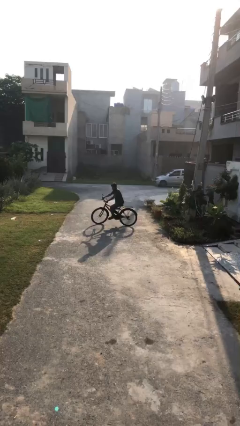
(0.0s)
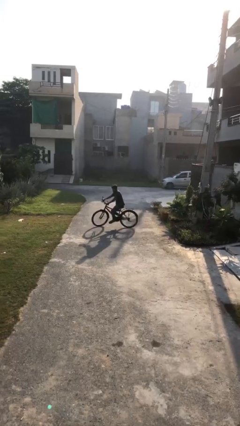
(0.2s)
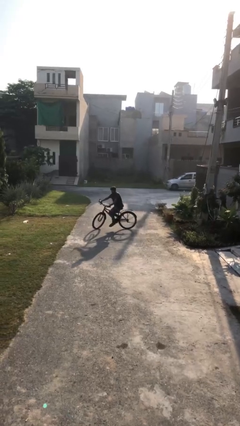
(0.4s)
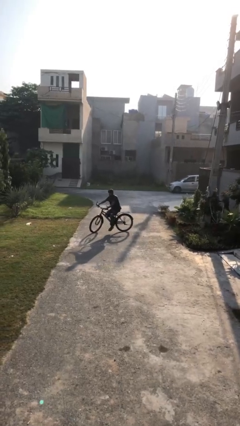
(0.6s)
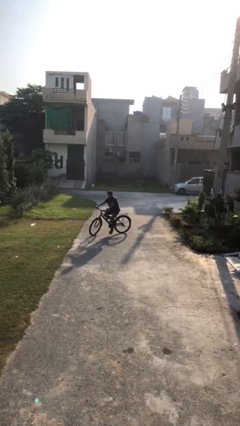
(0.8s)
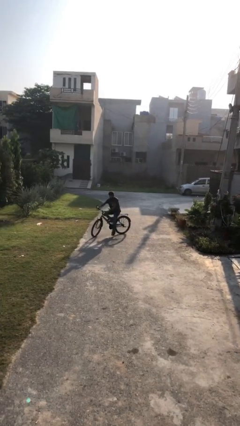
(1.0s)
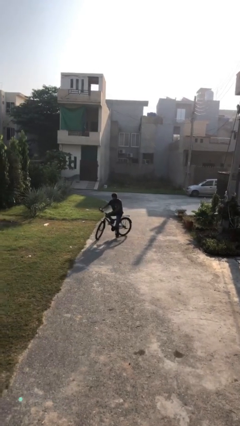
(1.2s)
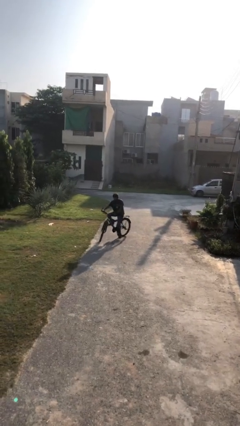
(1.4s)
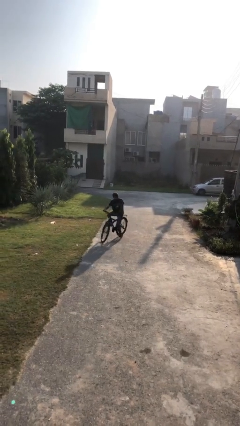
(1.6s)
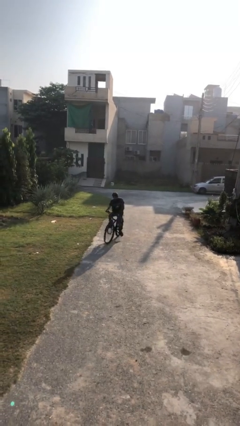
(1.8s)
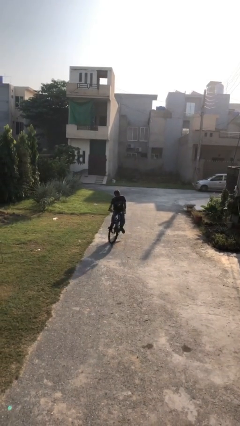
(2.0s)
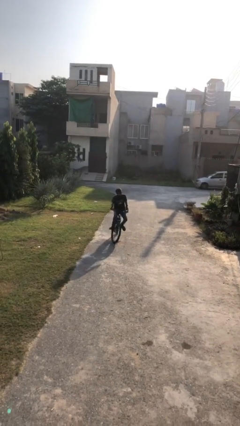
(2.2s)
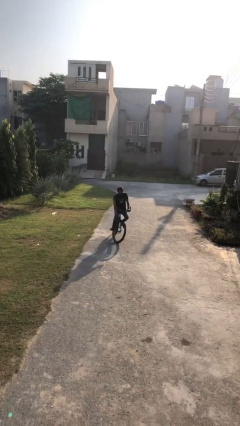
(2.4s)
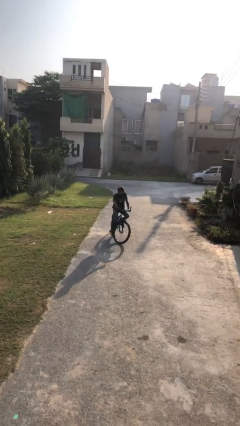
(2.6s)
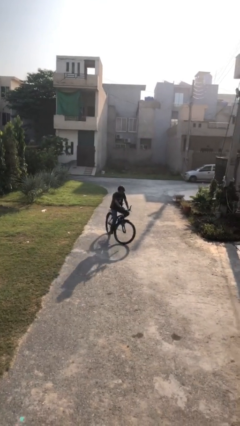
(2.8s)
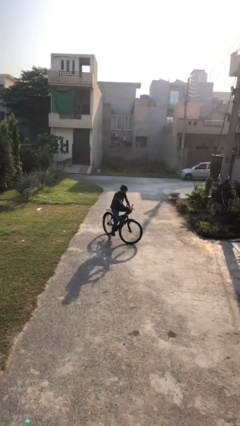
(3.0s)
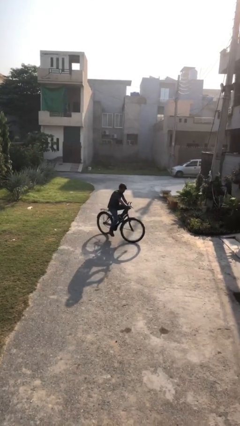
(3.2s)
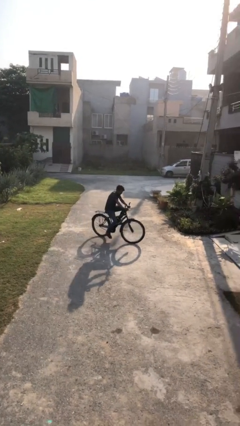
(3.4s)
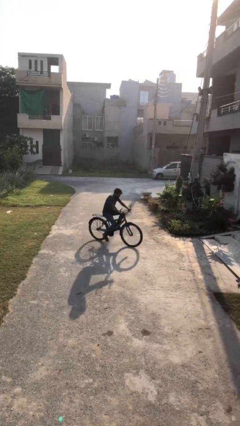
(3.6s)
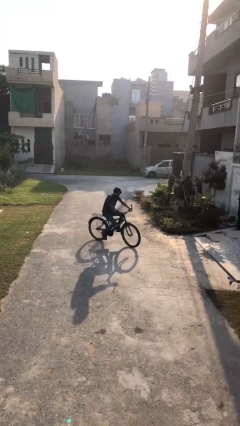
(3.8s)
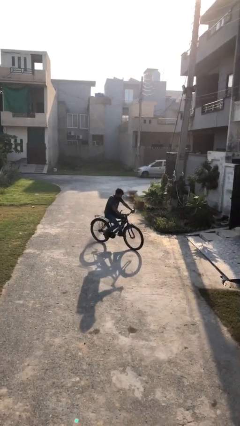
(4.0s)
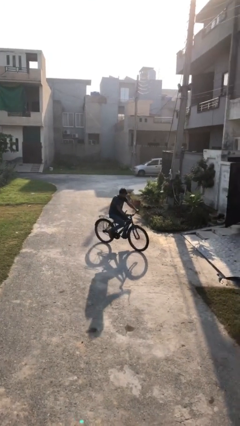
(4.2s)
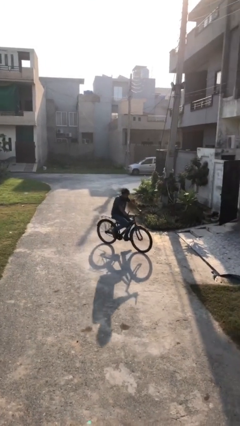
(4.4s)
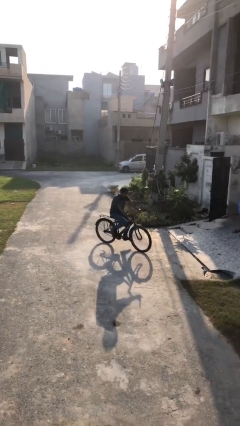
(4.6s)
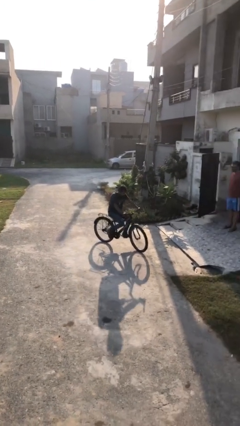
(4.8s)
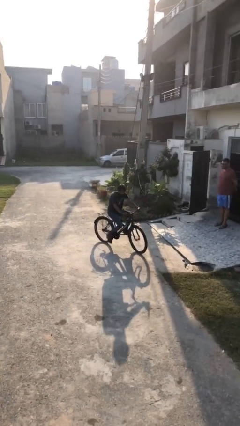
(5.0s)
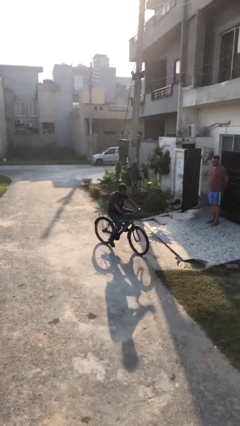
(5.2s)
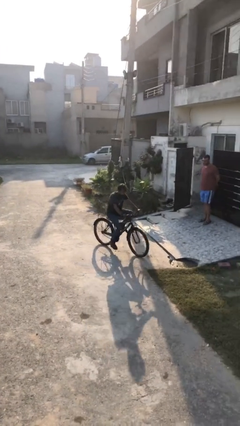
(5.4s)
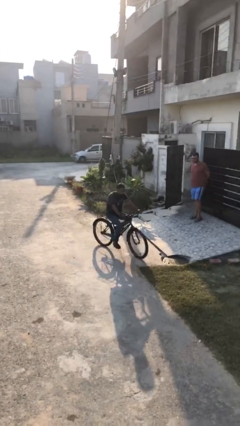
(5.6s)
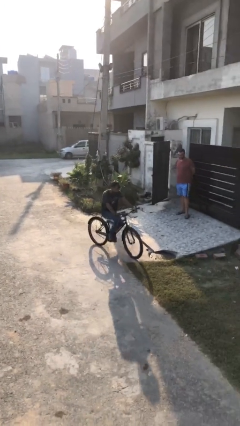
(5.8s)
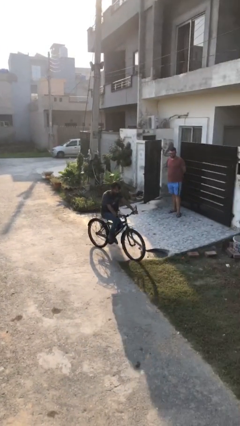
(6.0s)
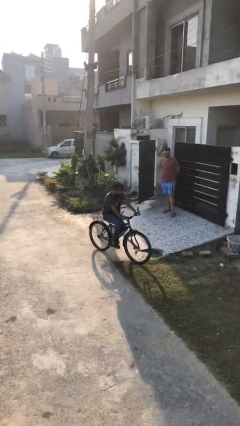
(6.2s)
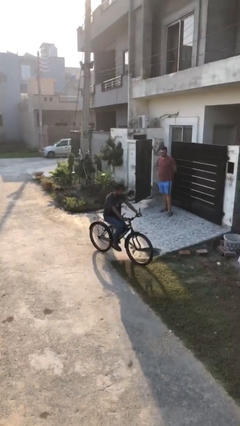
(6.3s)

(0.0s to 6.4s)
person rides bicycle

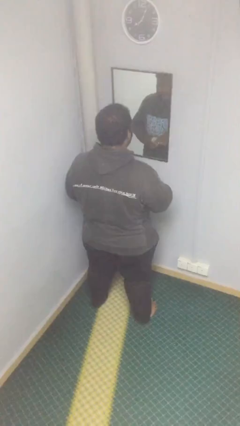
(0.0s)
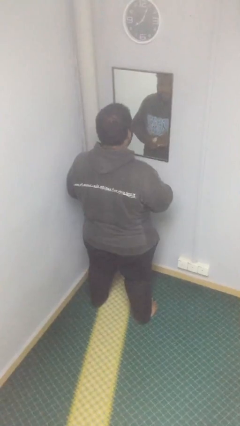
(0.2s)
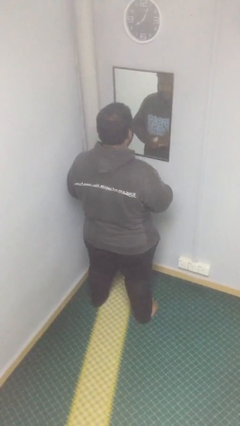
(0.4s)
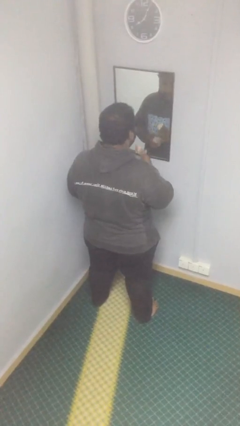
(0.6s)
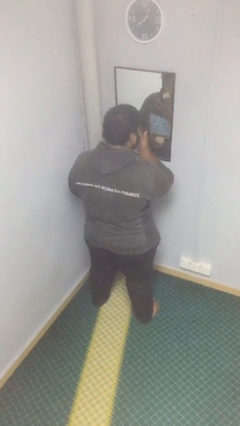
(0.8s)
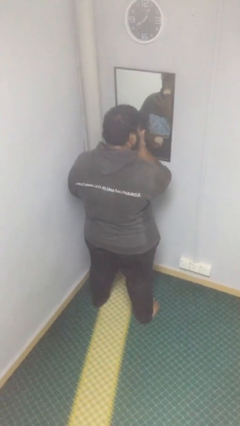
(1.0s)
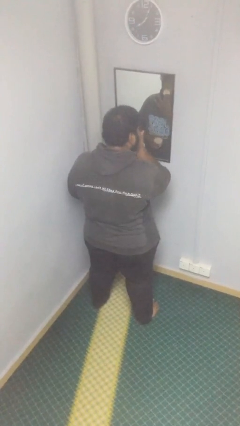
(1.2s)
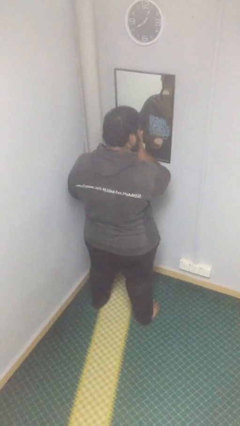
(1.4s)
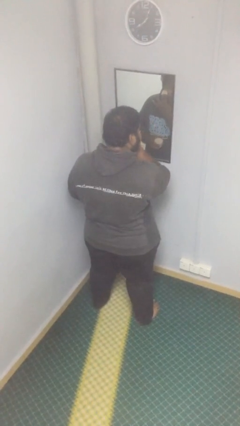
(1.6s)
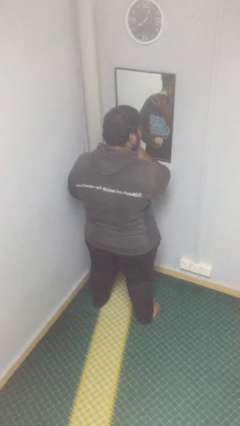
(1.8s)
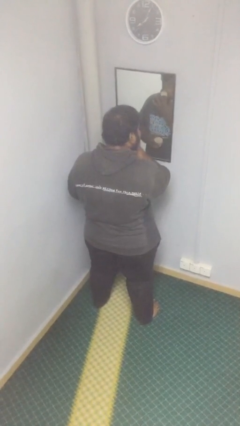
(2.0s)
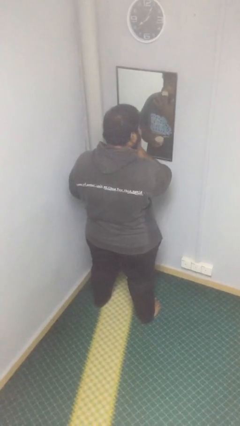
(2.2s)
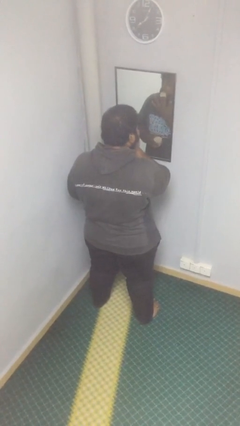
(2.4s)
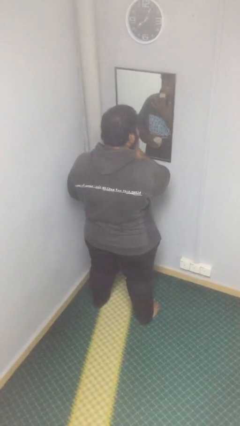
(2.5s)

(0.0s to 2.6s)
person applies foundation makeup

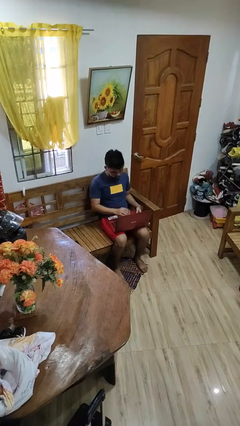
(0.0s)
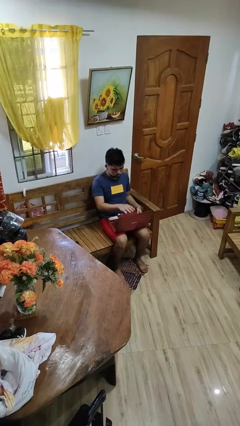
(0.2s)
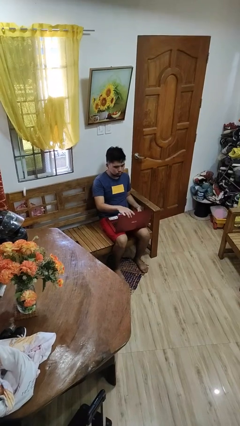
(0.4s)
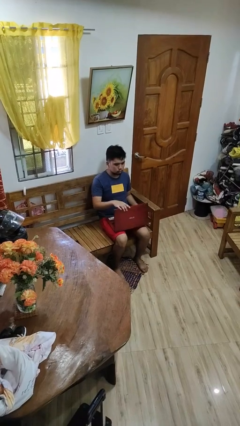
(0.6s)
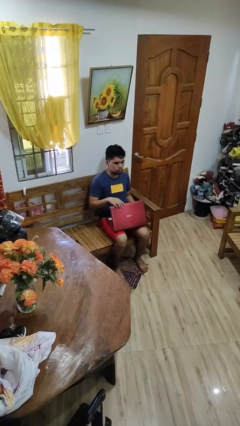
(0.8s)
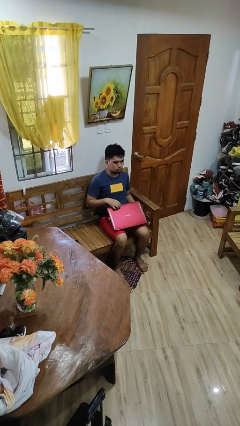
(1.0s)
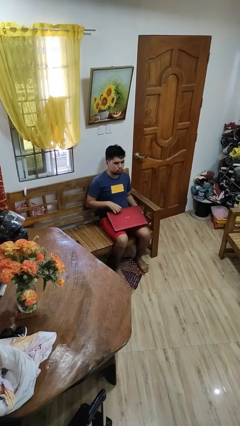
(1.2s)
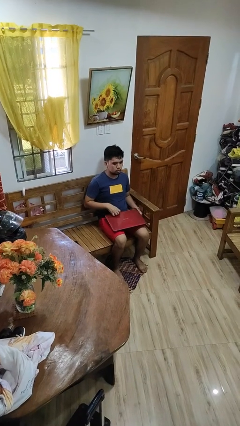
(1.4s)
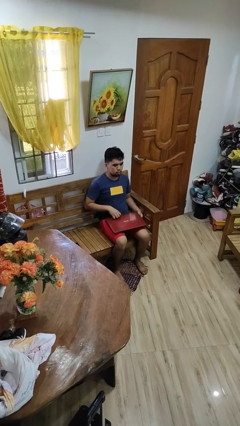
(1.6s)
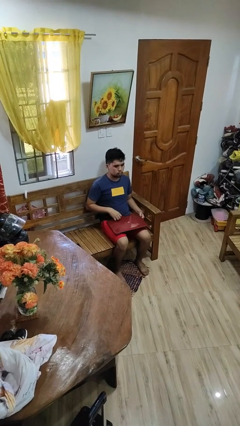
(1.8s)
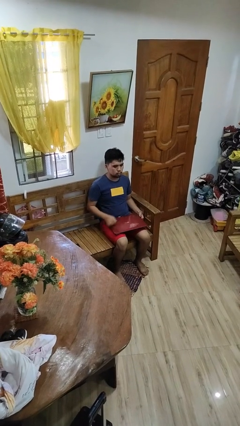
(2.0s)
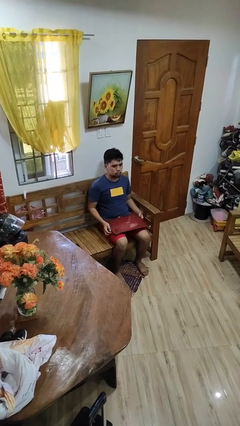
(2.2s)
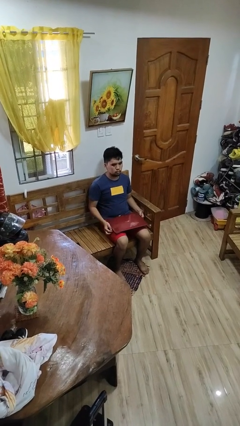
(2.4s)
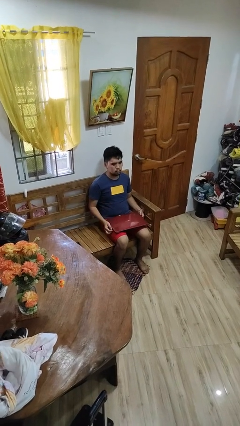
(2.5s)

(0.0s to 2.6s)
person closes laptop

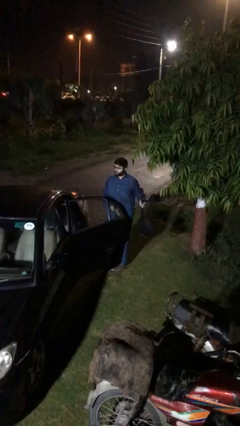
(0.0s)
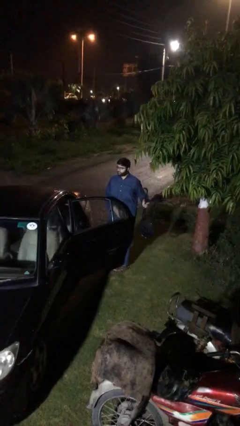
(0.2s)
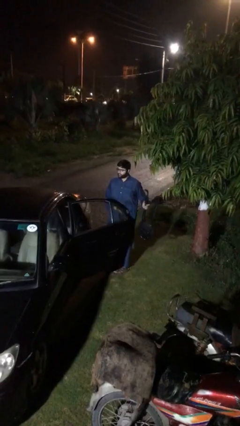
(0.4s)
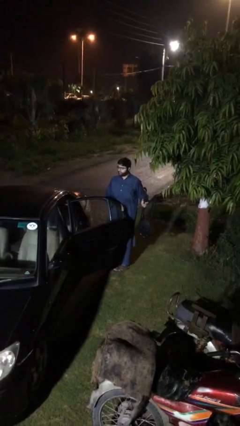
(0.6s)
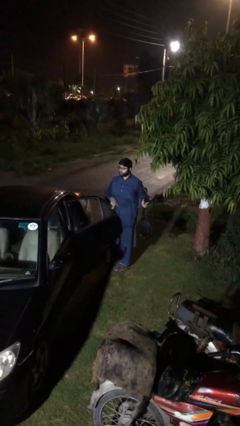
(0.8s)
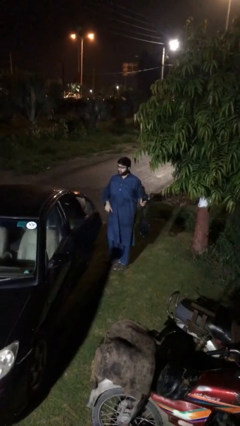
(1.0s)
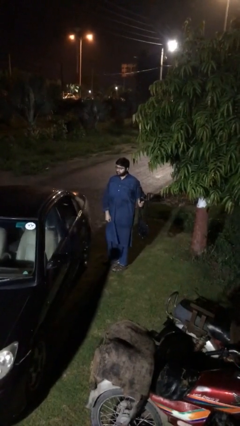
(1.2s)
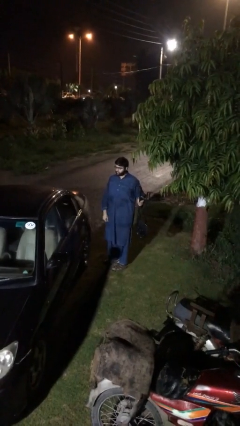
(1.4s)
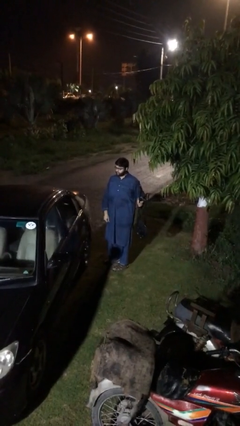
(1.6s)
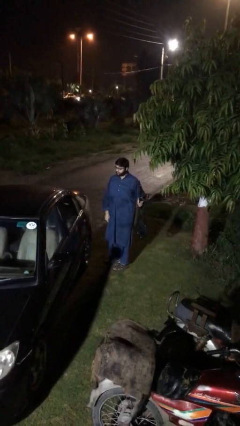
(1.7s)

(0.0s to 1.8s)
person closes car door

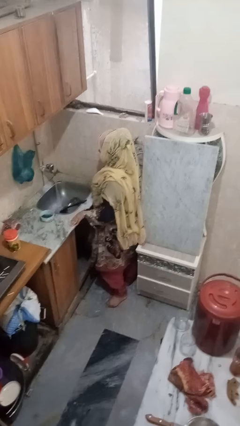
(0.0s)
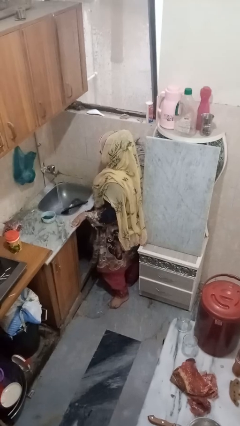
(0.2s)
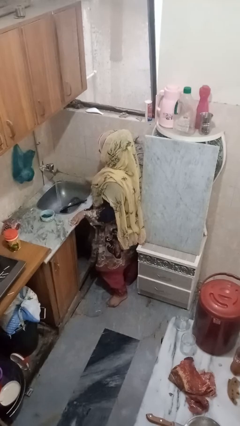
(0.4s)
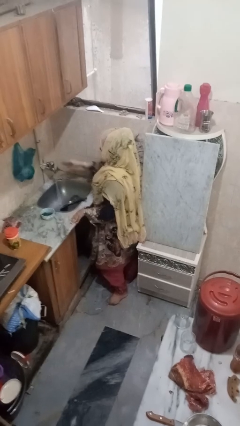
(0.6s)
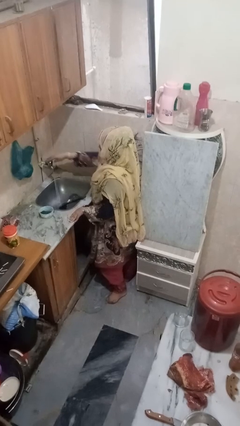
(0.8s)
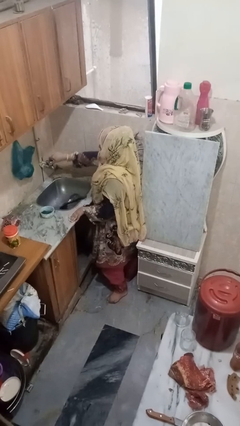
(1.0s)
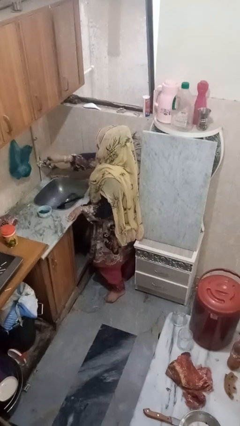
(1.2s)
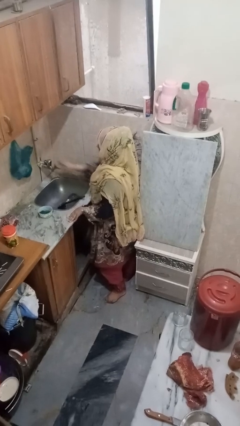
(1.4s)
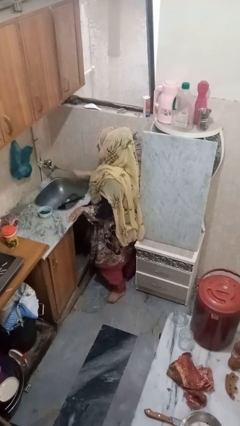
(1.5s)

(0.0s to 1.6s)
person turns off faucet

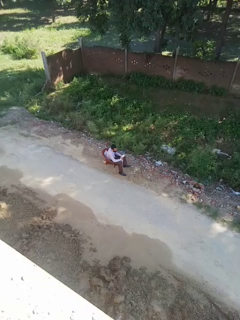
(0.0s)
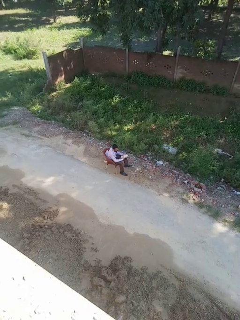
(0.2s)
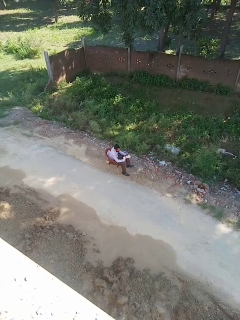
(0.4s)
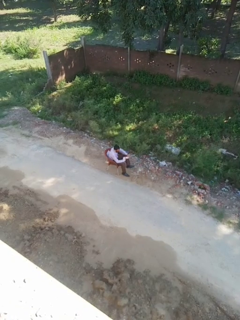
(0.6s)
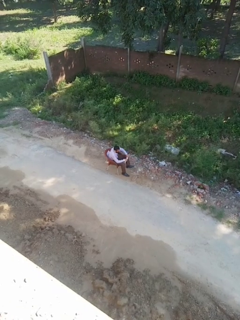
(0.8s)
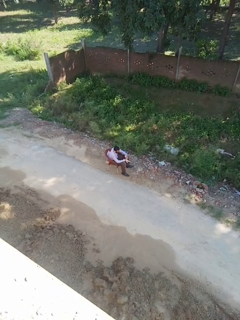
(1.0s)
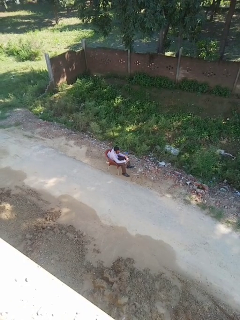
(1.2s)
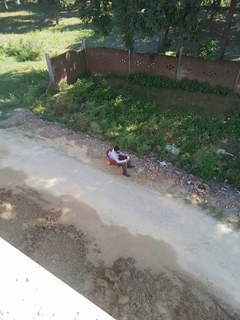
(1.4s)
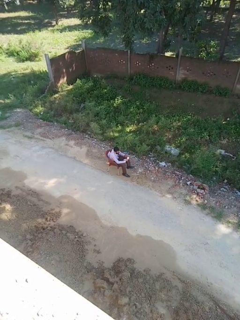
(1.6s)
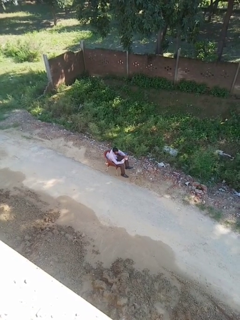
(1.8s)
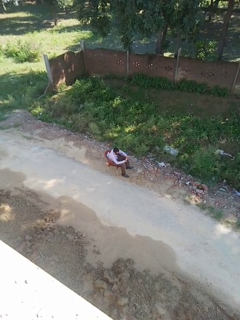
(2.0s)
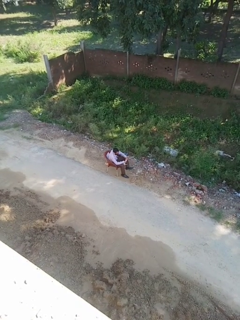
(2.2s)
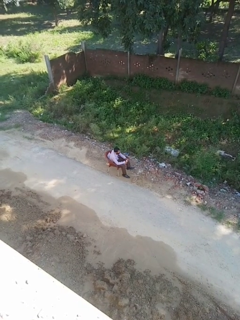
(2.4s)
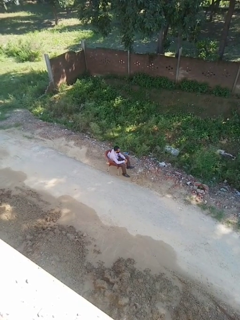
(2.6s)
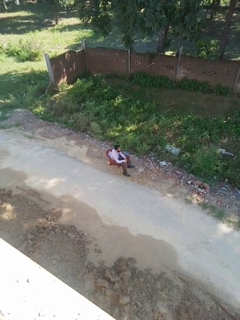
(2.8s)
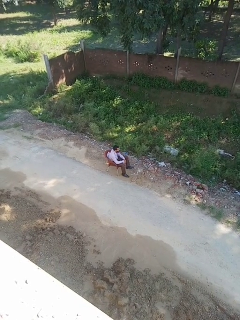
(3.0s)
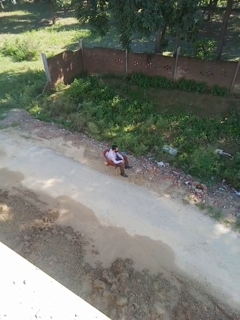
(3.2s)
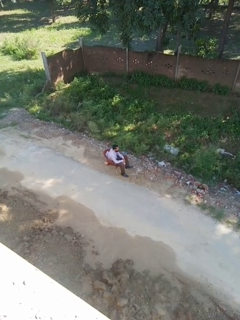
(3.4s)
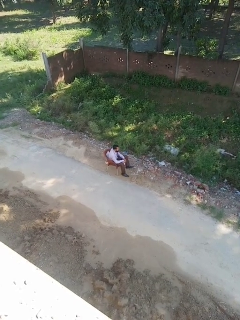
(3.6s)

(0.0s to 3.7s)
person squeezes object
